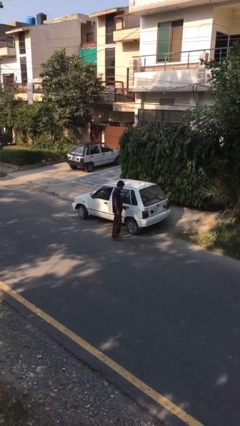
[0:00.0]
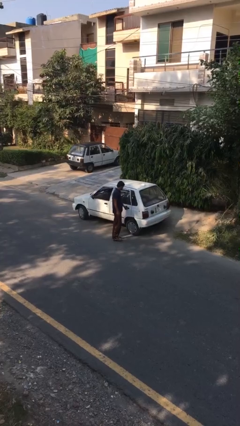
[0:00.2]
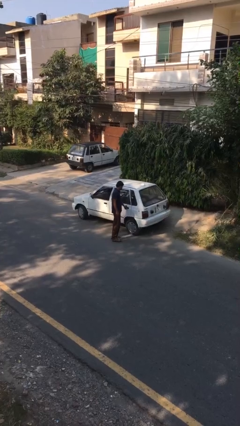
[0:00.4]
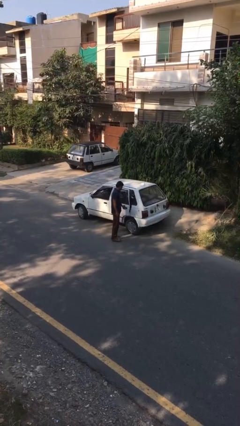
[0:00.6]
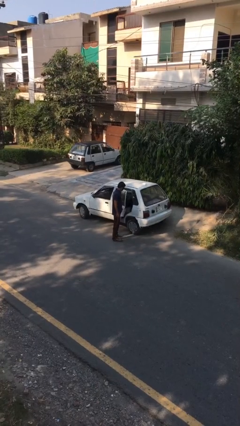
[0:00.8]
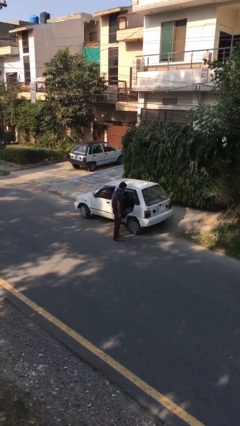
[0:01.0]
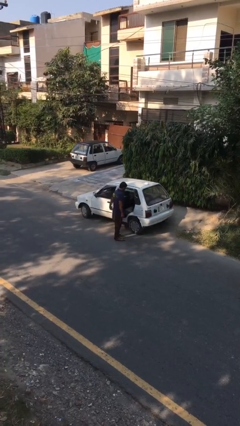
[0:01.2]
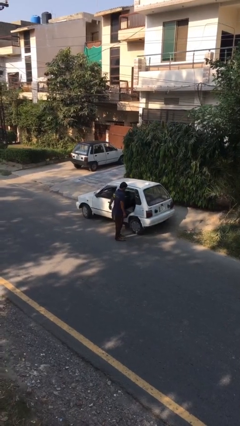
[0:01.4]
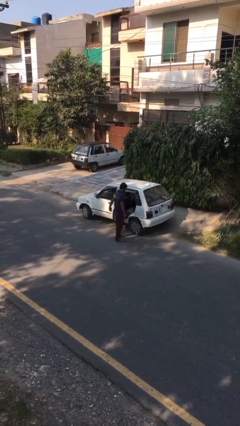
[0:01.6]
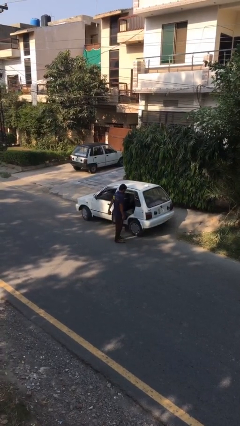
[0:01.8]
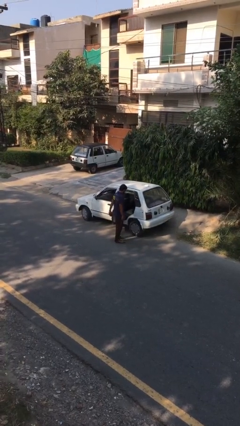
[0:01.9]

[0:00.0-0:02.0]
person opens car door

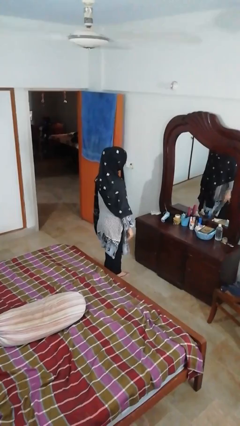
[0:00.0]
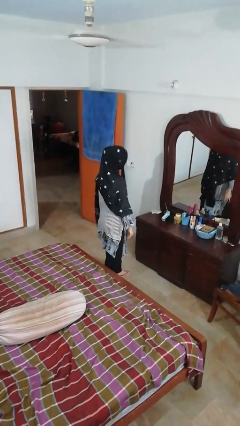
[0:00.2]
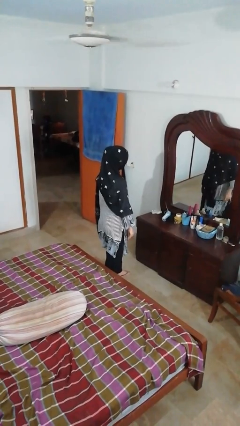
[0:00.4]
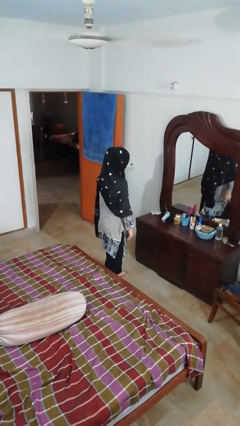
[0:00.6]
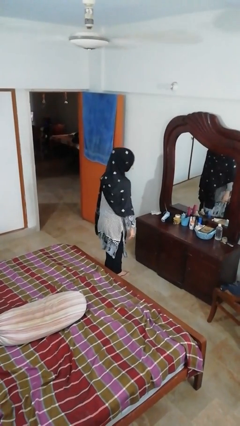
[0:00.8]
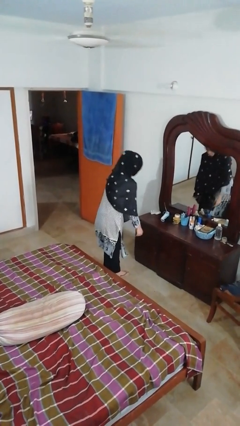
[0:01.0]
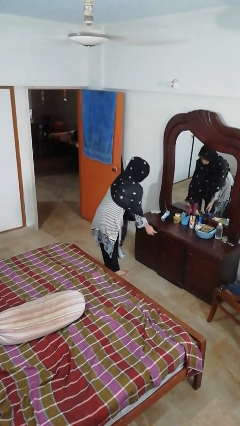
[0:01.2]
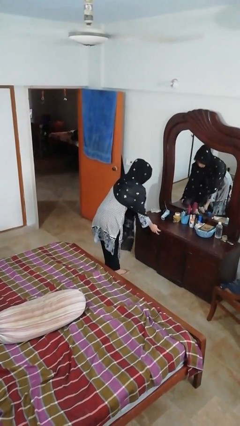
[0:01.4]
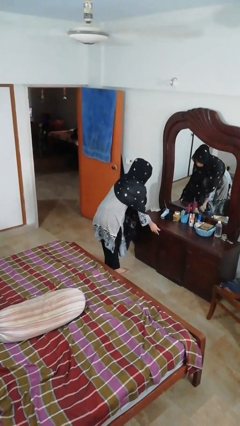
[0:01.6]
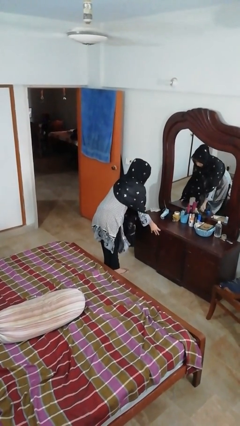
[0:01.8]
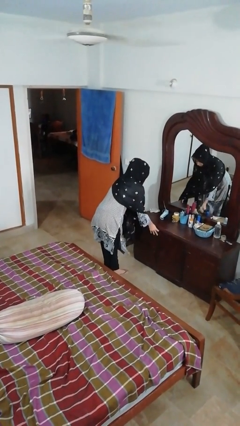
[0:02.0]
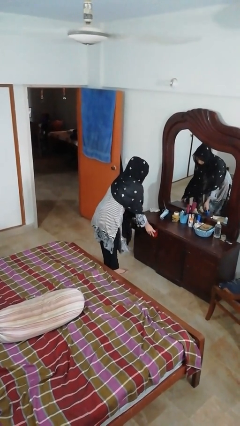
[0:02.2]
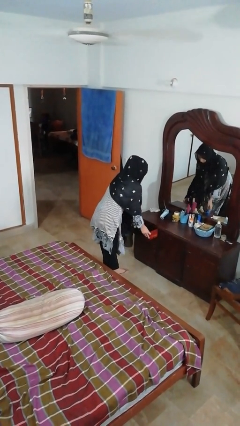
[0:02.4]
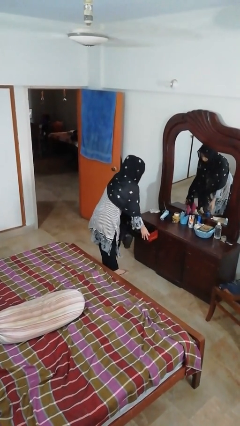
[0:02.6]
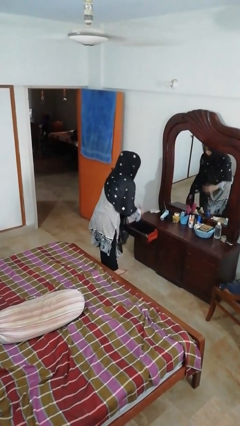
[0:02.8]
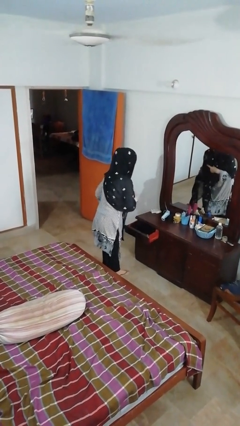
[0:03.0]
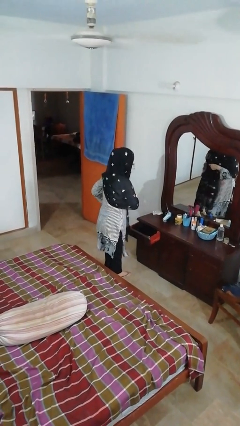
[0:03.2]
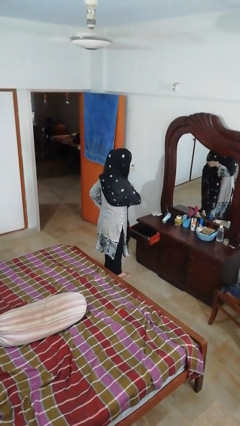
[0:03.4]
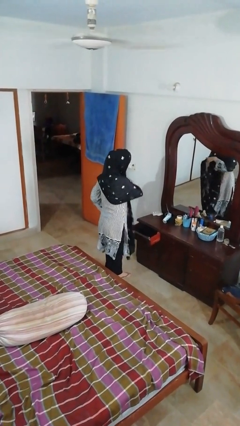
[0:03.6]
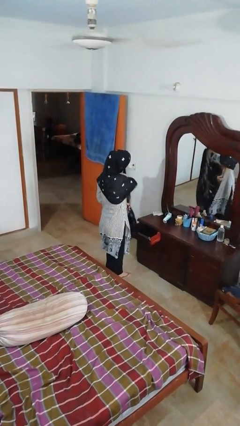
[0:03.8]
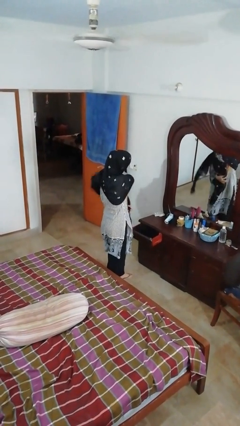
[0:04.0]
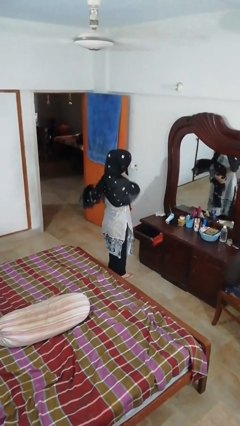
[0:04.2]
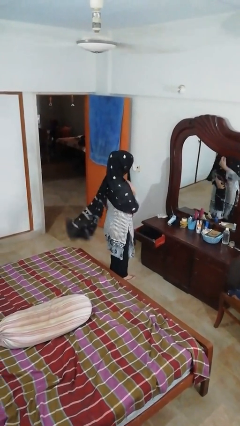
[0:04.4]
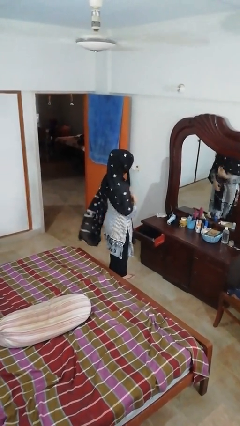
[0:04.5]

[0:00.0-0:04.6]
person opens dresser drawer

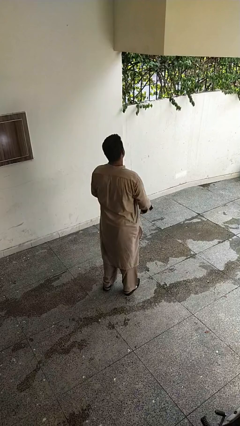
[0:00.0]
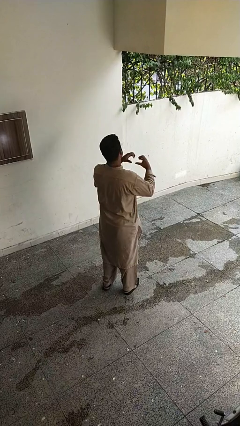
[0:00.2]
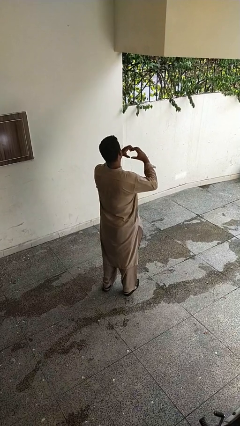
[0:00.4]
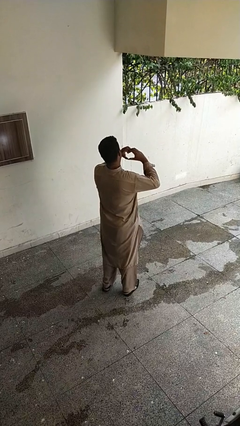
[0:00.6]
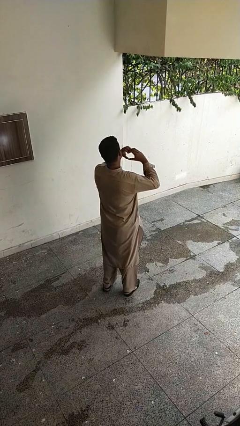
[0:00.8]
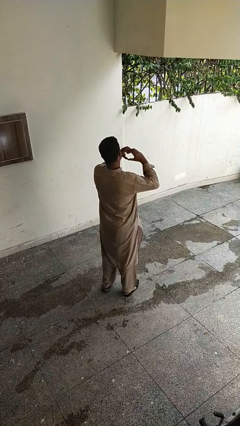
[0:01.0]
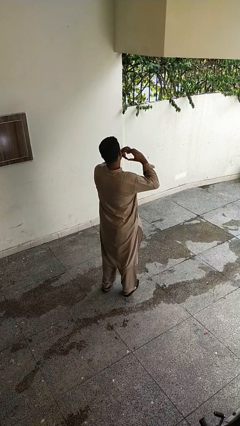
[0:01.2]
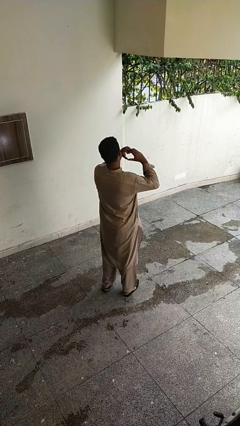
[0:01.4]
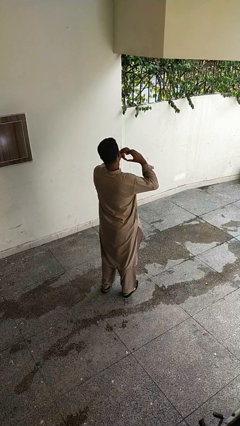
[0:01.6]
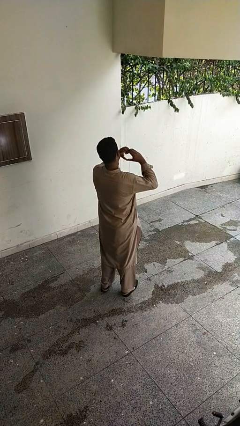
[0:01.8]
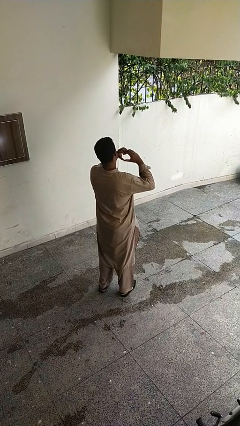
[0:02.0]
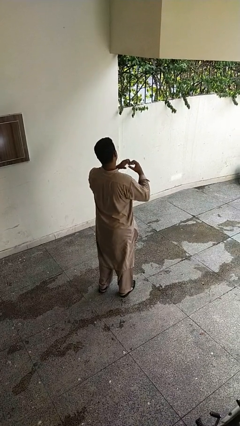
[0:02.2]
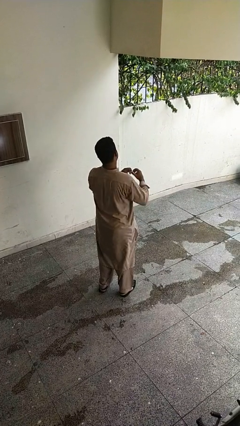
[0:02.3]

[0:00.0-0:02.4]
person gestures heart

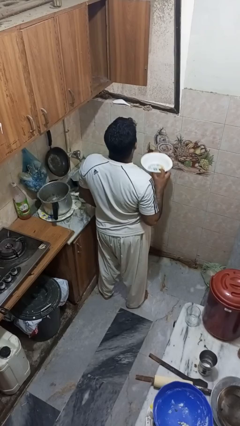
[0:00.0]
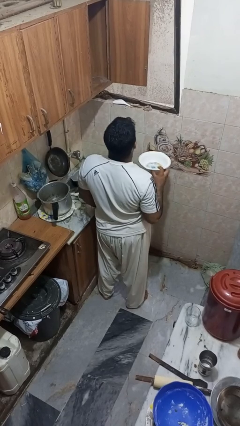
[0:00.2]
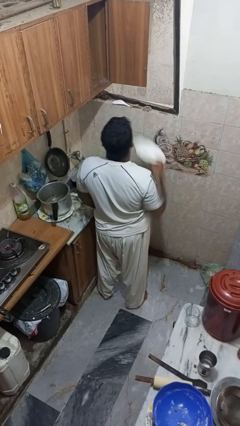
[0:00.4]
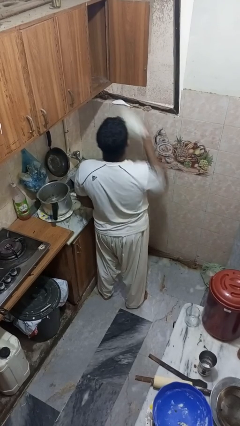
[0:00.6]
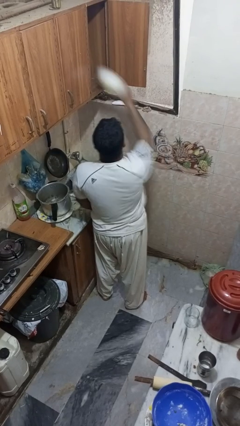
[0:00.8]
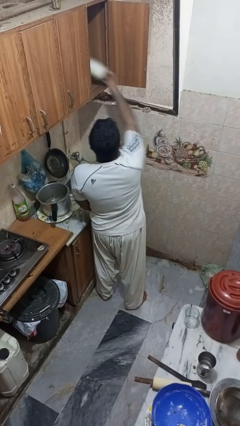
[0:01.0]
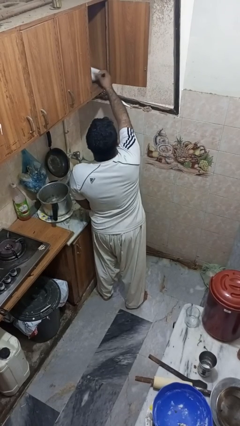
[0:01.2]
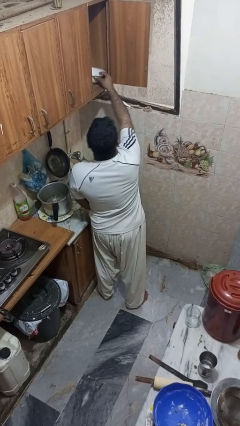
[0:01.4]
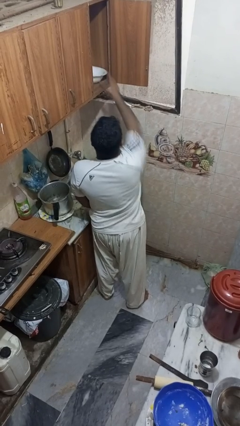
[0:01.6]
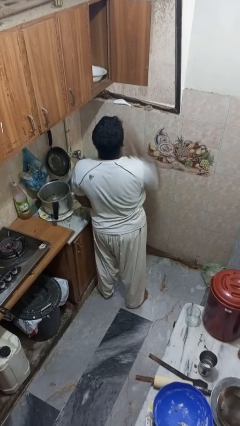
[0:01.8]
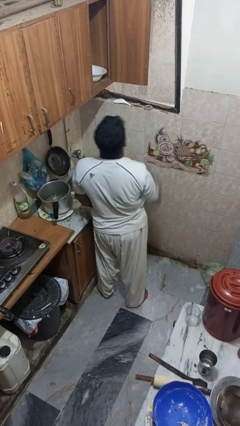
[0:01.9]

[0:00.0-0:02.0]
person puts object in cabinet

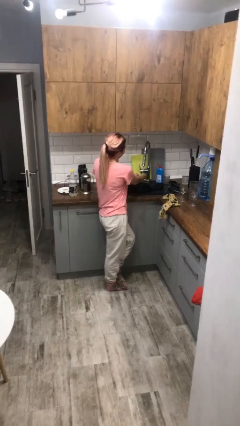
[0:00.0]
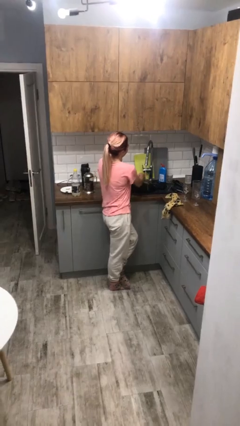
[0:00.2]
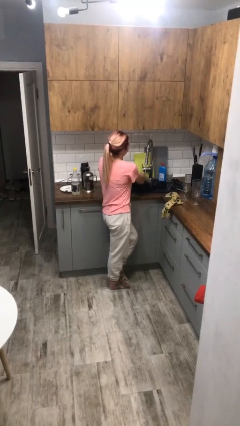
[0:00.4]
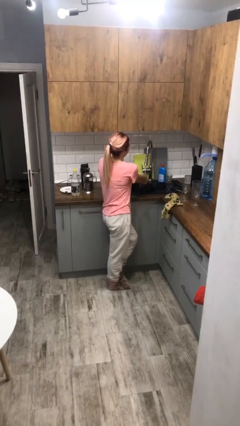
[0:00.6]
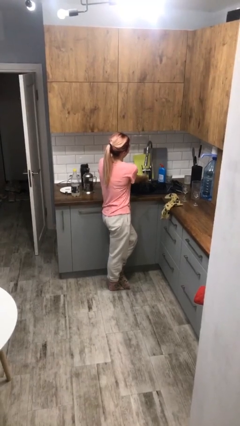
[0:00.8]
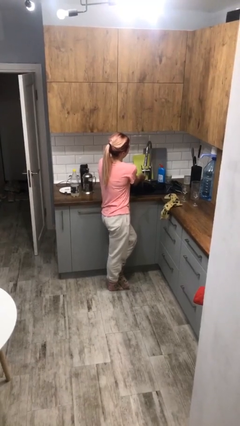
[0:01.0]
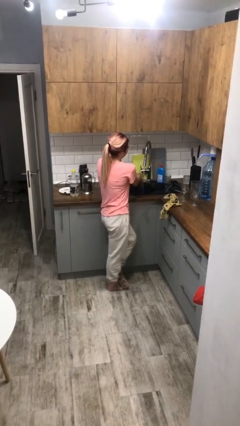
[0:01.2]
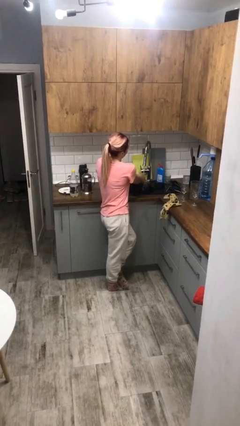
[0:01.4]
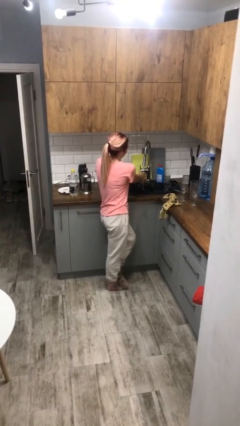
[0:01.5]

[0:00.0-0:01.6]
person washes hands

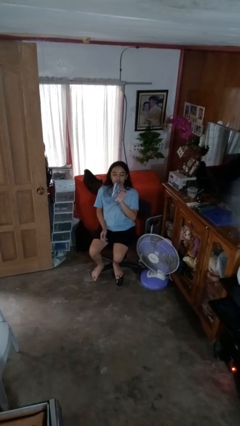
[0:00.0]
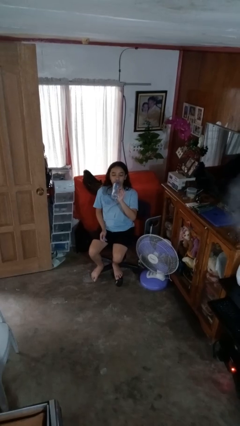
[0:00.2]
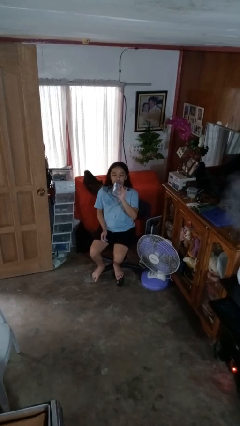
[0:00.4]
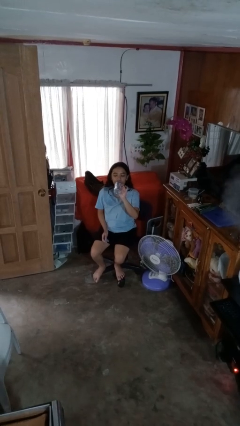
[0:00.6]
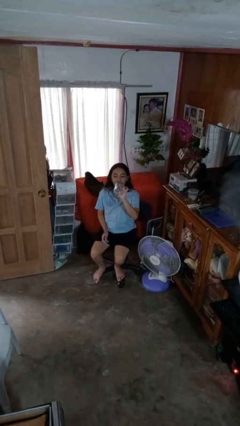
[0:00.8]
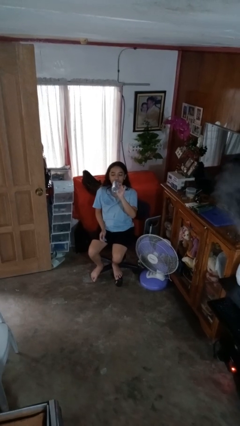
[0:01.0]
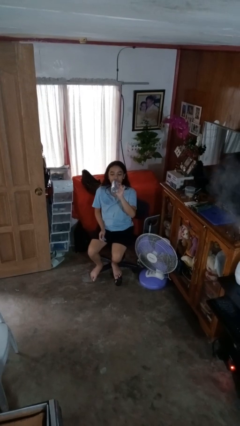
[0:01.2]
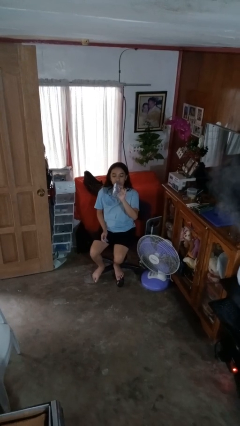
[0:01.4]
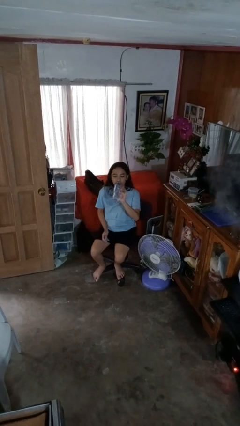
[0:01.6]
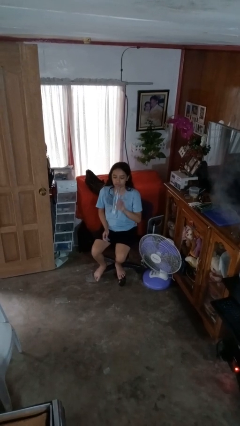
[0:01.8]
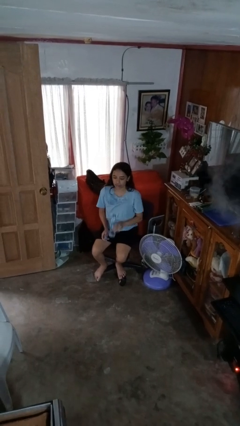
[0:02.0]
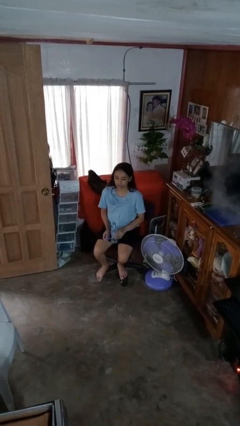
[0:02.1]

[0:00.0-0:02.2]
person drinks from bottle

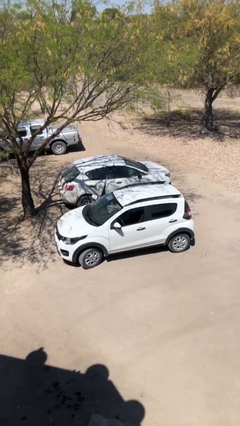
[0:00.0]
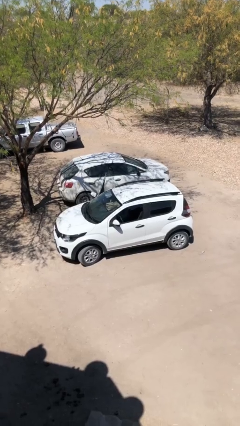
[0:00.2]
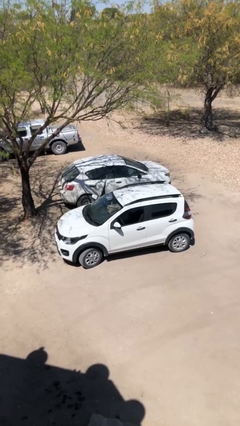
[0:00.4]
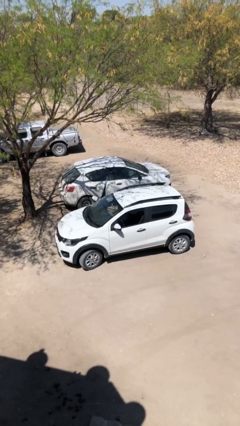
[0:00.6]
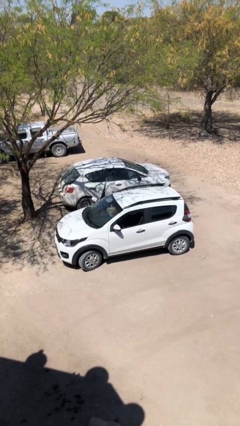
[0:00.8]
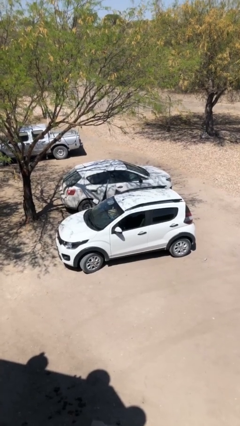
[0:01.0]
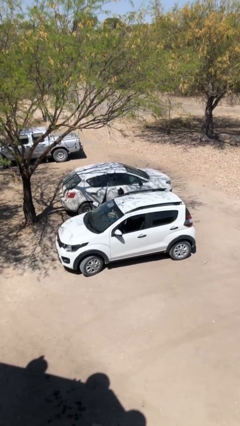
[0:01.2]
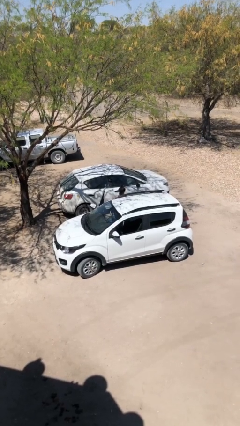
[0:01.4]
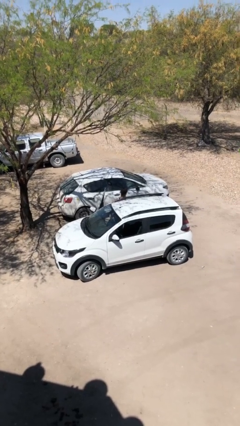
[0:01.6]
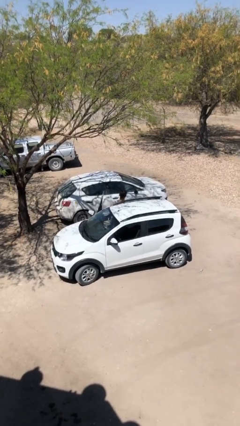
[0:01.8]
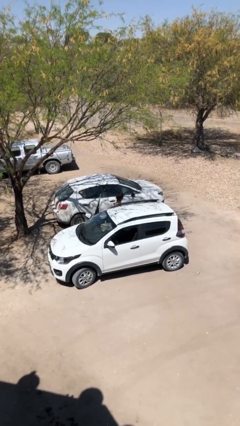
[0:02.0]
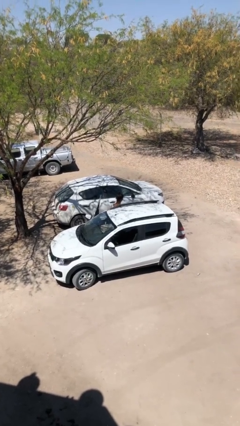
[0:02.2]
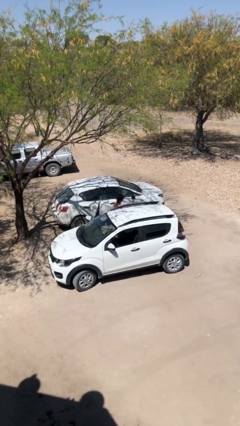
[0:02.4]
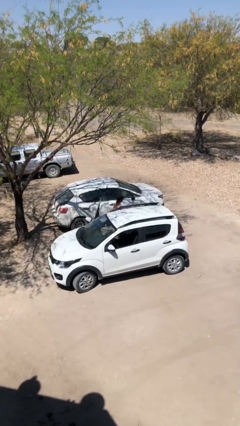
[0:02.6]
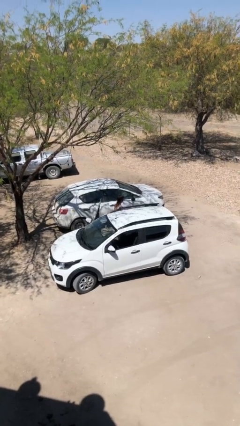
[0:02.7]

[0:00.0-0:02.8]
person exits car
